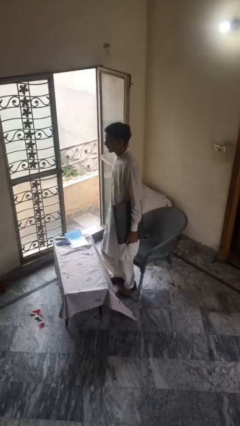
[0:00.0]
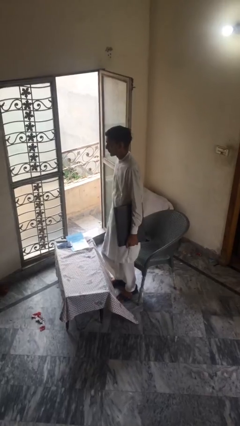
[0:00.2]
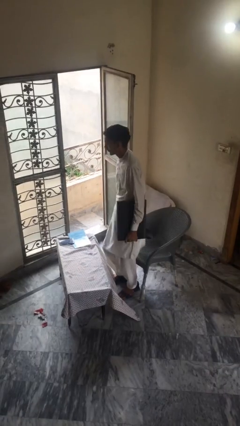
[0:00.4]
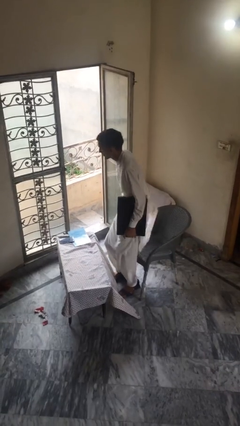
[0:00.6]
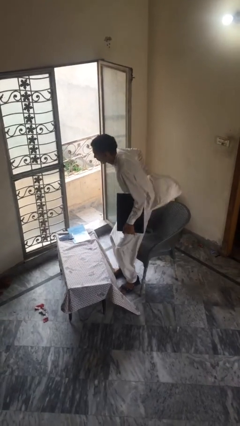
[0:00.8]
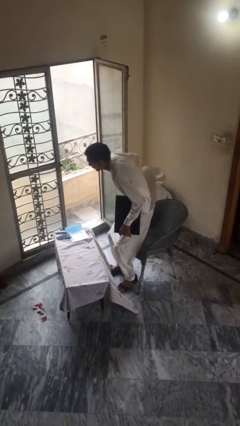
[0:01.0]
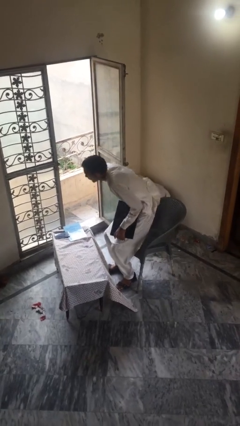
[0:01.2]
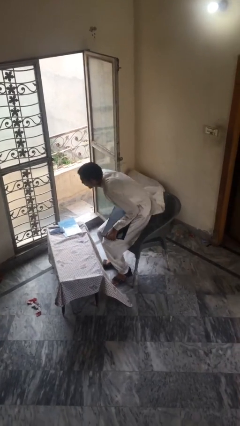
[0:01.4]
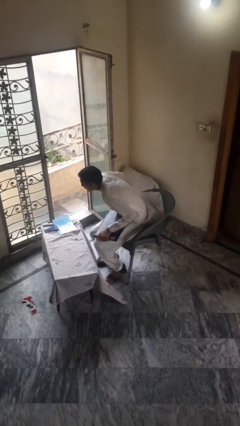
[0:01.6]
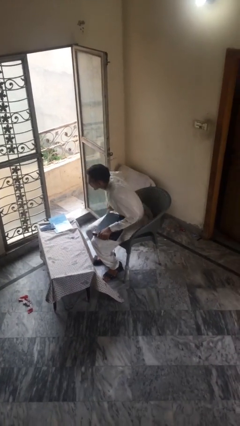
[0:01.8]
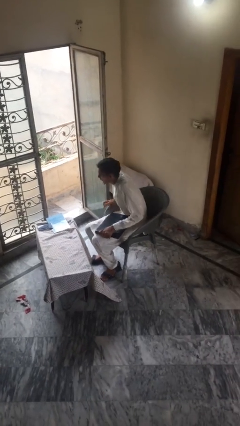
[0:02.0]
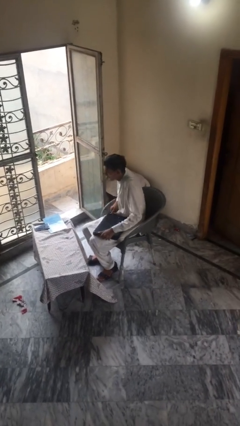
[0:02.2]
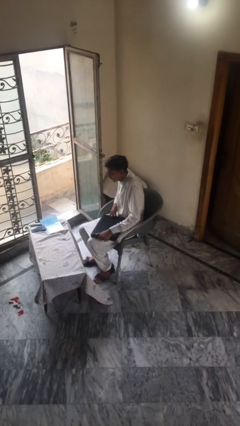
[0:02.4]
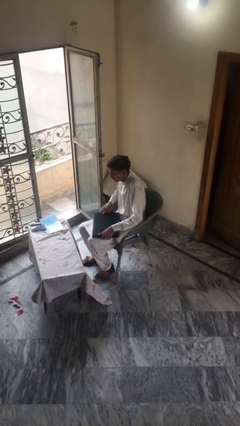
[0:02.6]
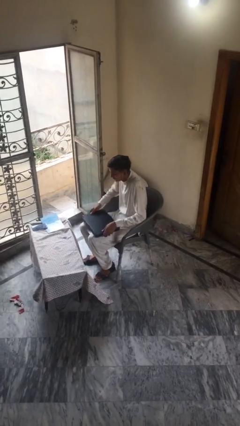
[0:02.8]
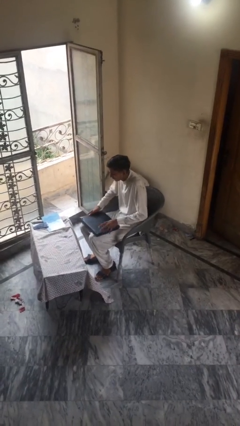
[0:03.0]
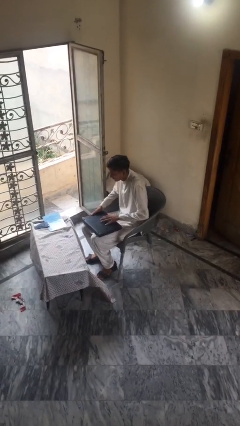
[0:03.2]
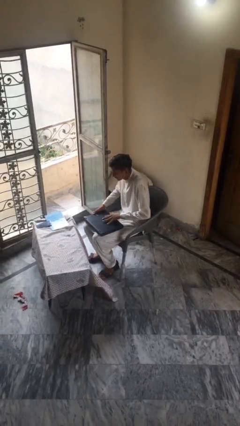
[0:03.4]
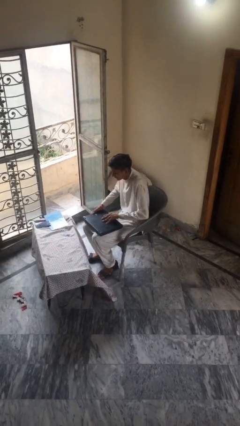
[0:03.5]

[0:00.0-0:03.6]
person sits down

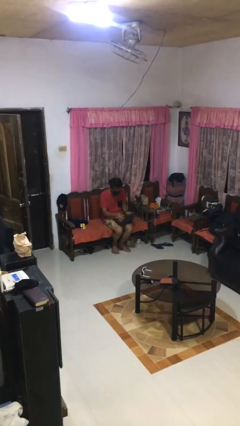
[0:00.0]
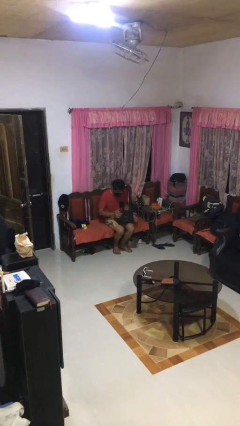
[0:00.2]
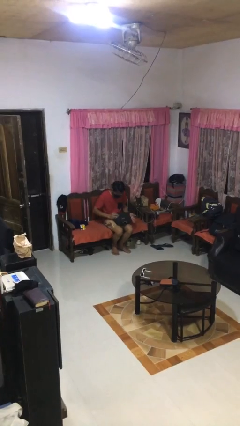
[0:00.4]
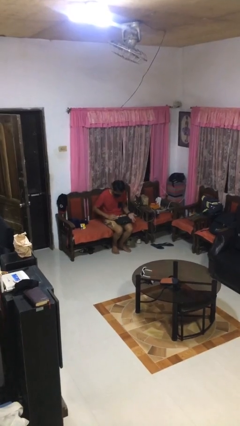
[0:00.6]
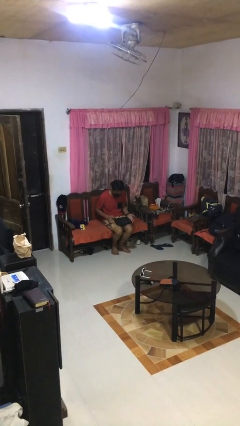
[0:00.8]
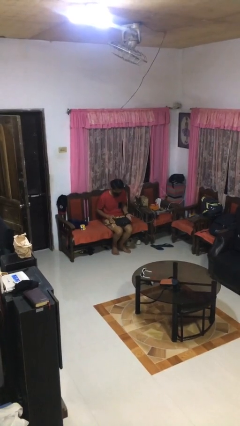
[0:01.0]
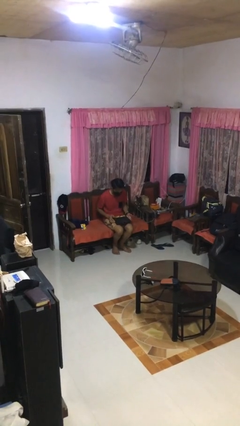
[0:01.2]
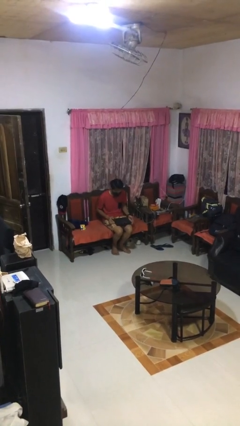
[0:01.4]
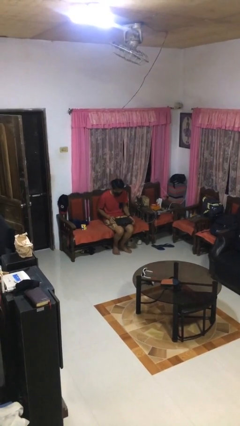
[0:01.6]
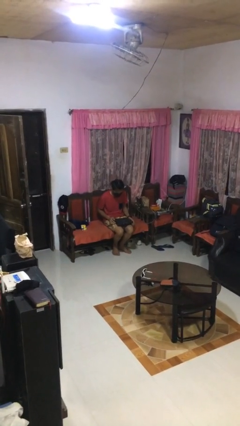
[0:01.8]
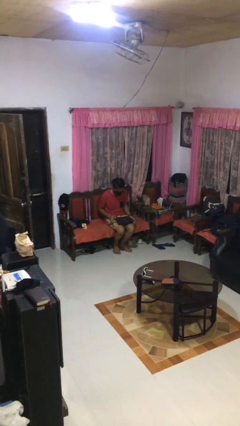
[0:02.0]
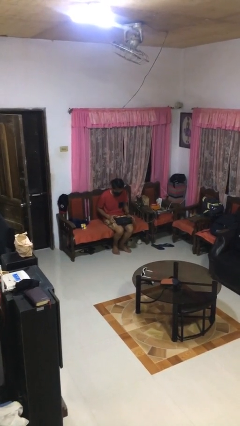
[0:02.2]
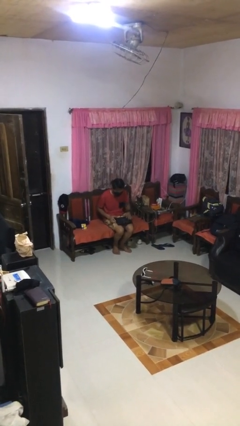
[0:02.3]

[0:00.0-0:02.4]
person closes laptop

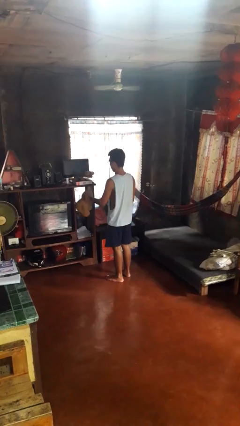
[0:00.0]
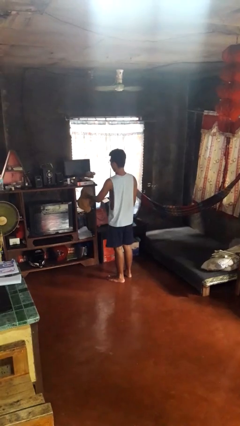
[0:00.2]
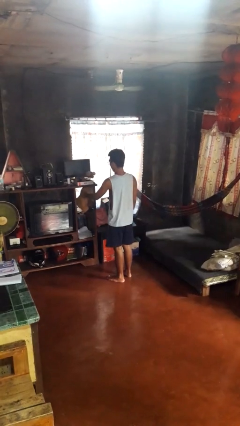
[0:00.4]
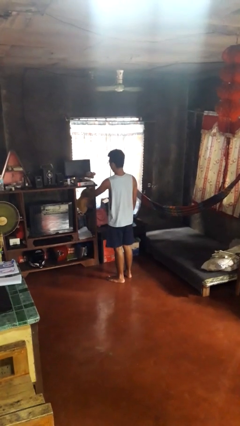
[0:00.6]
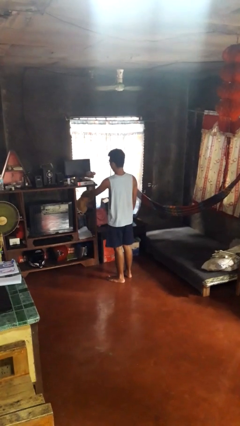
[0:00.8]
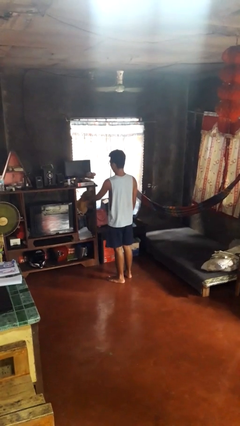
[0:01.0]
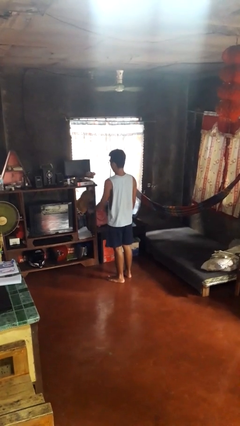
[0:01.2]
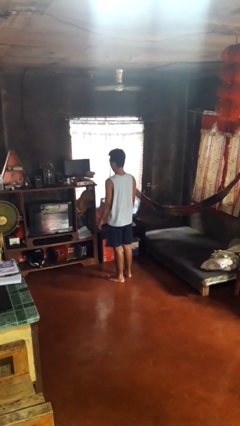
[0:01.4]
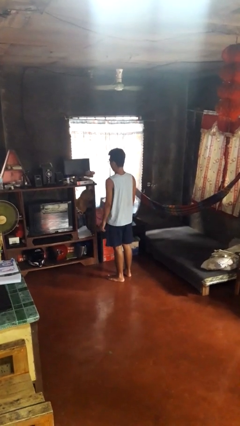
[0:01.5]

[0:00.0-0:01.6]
person puts down object into cabinet

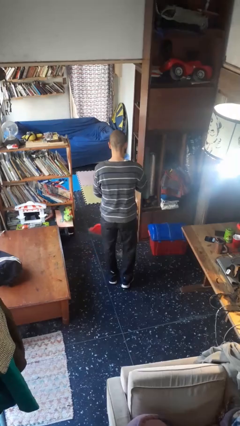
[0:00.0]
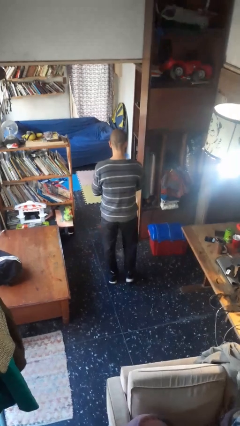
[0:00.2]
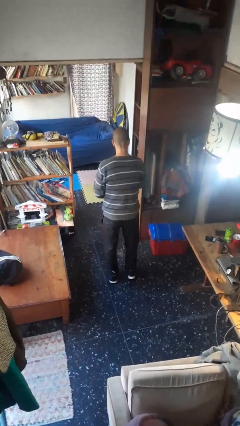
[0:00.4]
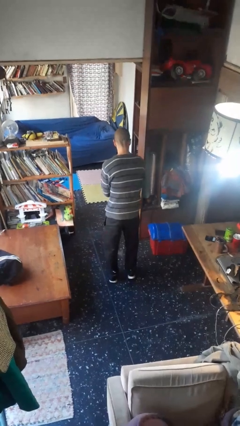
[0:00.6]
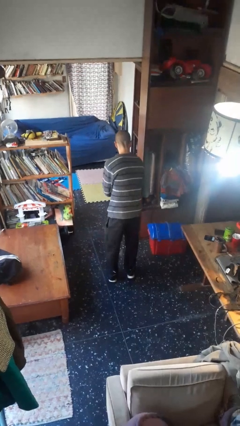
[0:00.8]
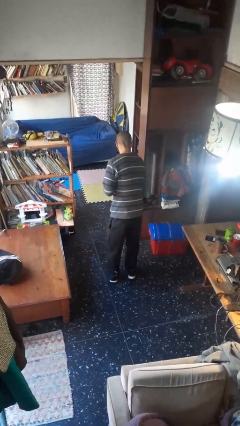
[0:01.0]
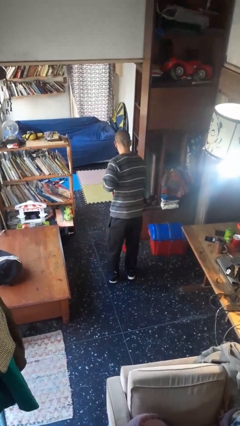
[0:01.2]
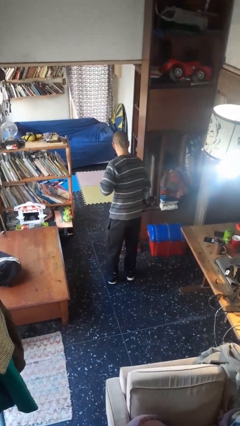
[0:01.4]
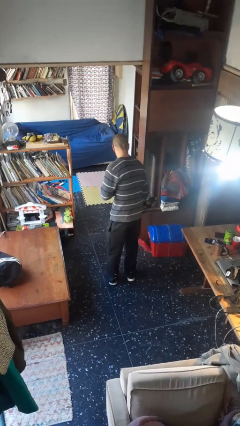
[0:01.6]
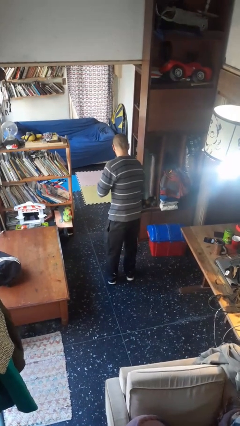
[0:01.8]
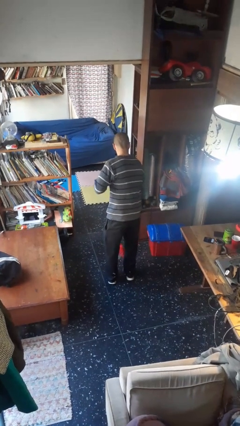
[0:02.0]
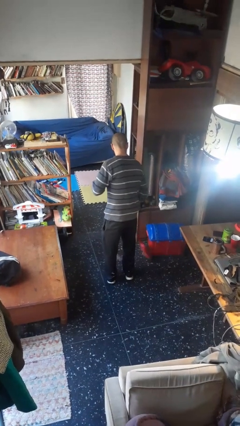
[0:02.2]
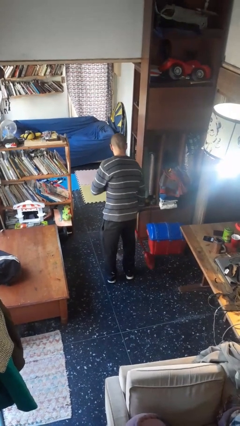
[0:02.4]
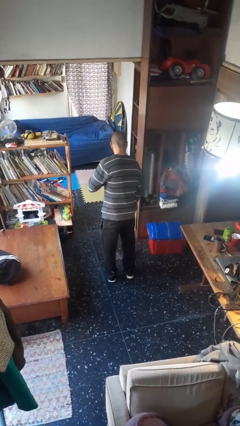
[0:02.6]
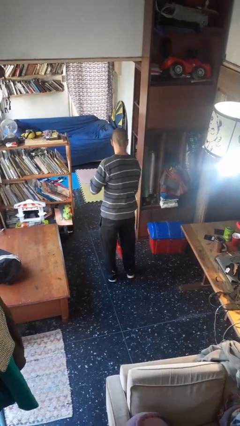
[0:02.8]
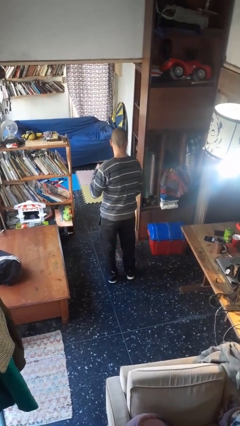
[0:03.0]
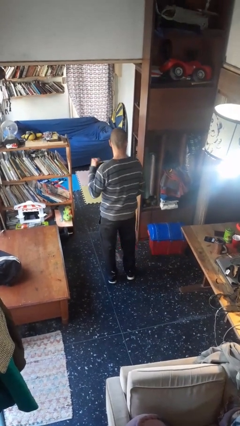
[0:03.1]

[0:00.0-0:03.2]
person sweeps floor

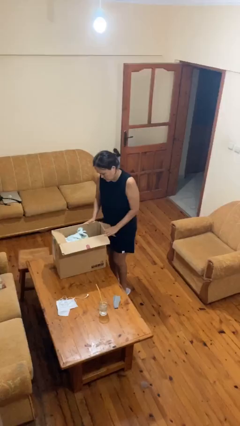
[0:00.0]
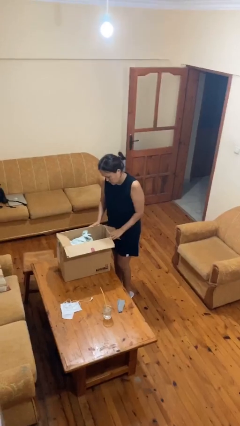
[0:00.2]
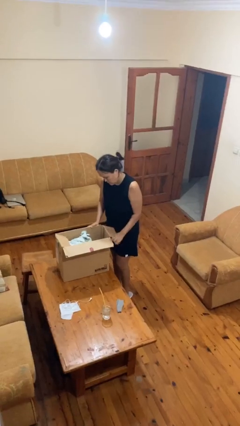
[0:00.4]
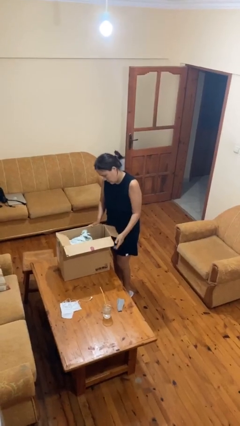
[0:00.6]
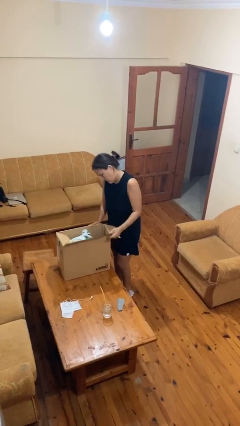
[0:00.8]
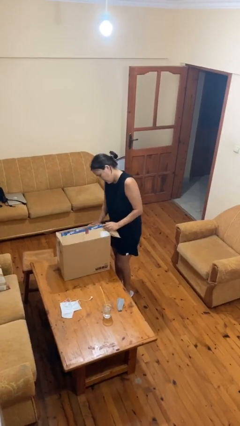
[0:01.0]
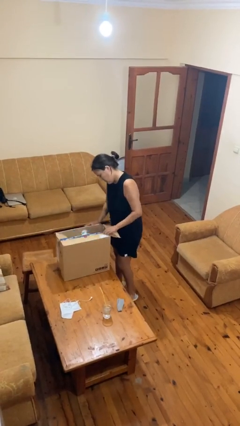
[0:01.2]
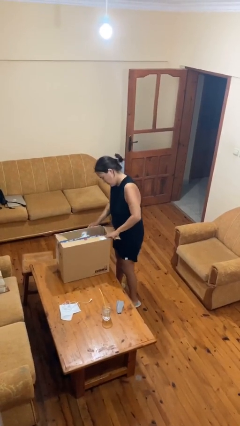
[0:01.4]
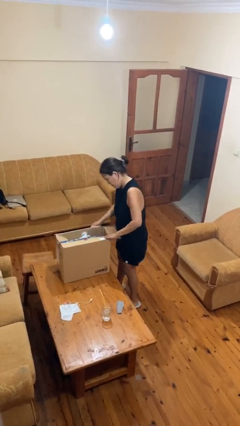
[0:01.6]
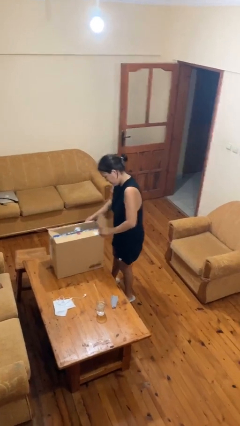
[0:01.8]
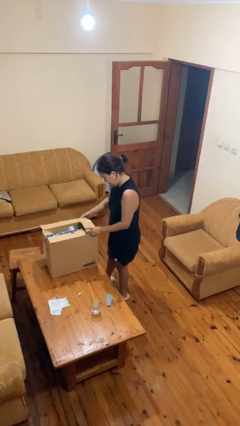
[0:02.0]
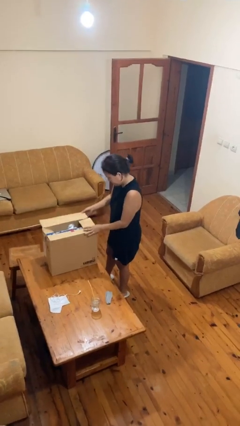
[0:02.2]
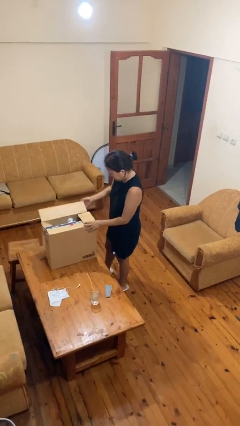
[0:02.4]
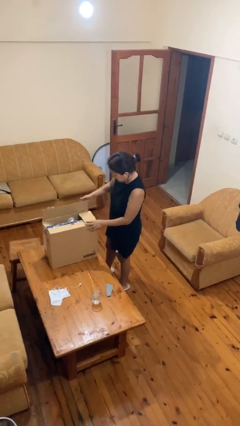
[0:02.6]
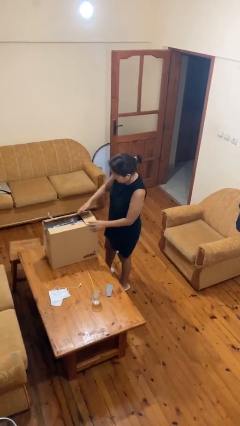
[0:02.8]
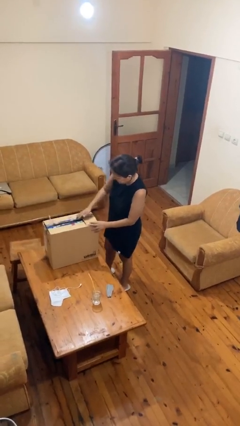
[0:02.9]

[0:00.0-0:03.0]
person closes box

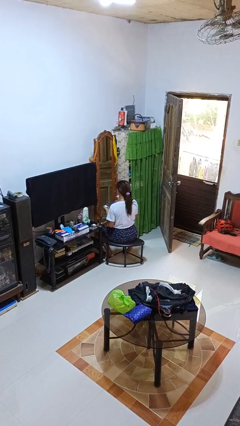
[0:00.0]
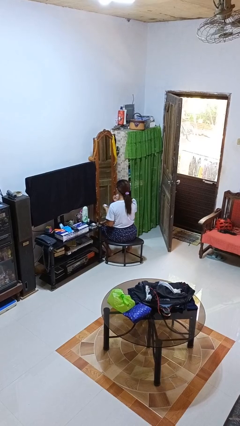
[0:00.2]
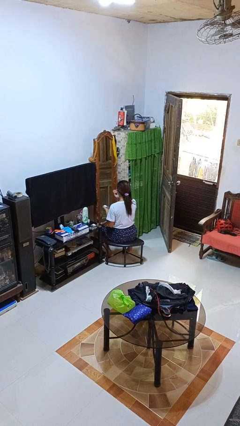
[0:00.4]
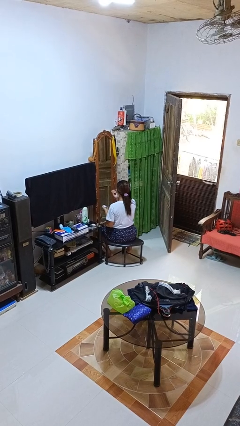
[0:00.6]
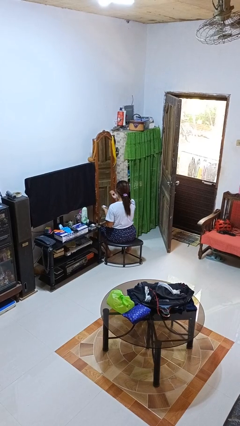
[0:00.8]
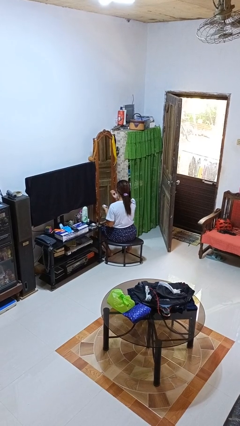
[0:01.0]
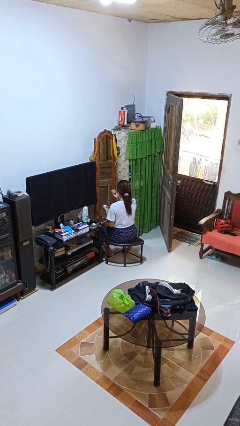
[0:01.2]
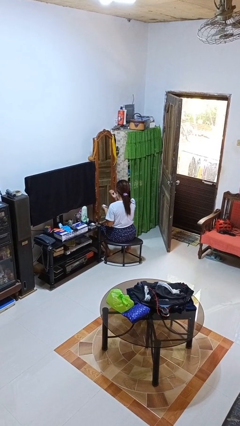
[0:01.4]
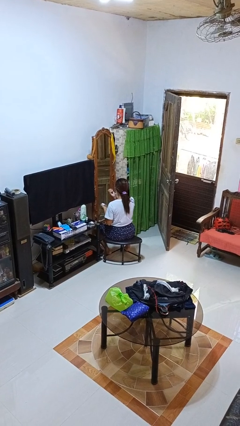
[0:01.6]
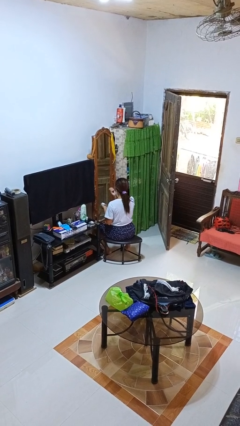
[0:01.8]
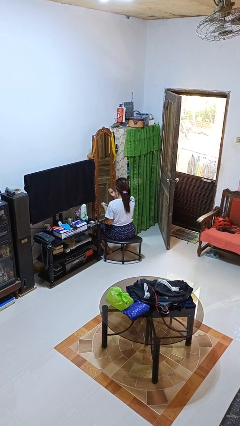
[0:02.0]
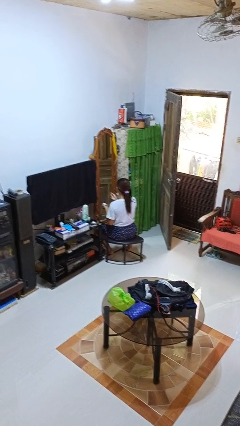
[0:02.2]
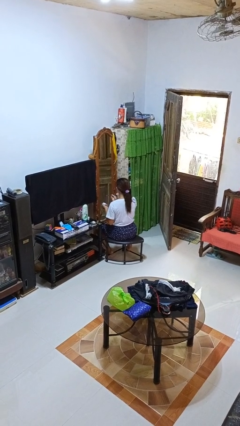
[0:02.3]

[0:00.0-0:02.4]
person applies eye makeup

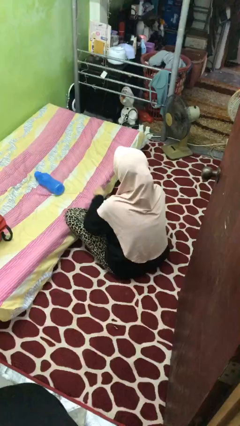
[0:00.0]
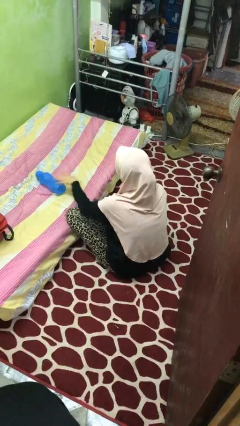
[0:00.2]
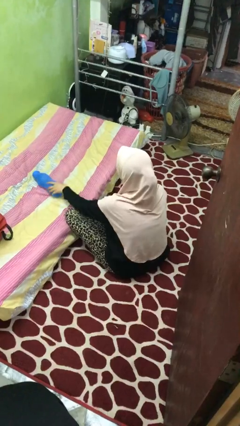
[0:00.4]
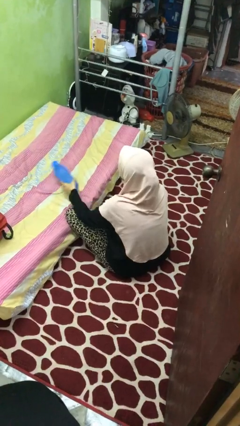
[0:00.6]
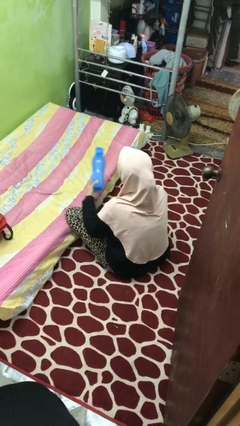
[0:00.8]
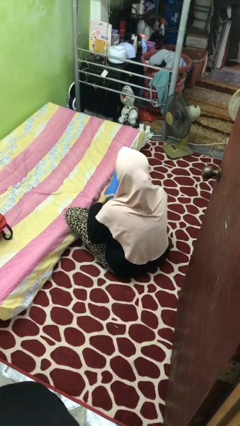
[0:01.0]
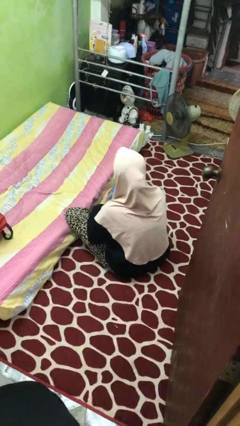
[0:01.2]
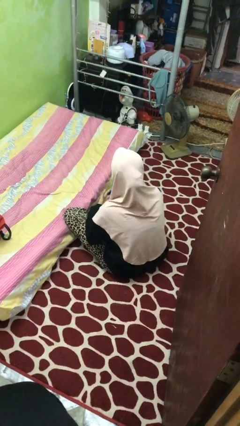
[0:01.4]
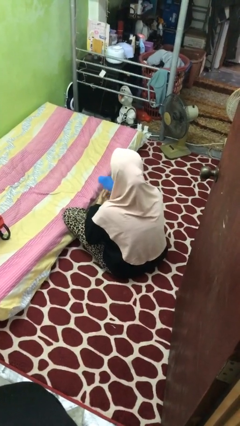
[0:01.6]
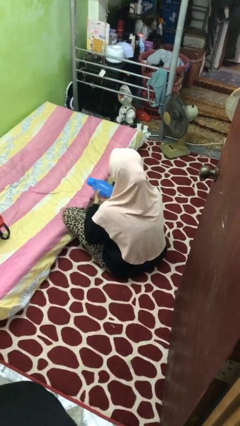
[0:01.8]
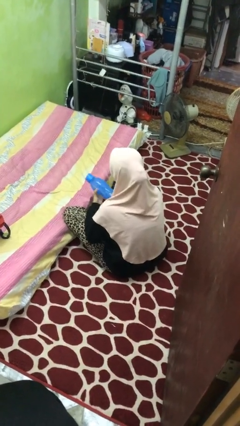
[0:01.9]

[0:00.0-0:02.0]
person picks up object from bed
